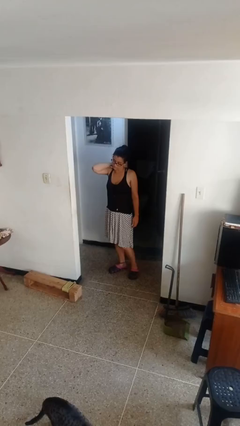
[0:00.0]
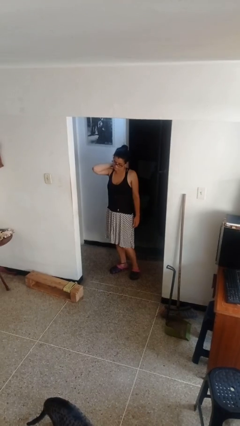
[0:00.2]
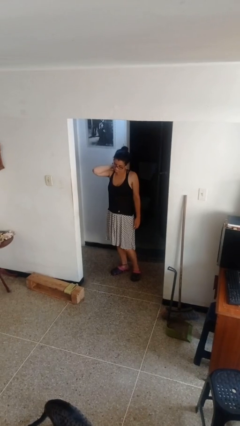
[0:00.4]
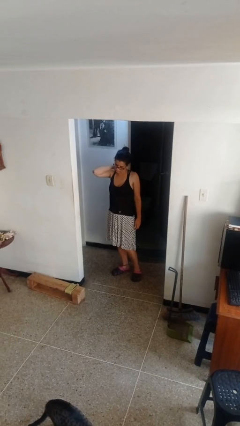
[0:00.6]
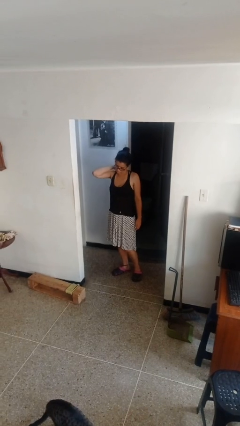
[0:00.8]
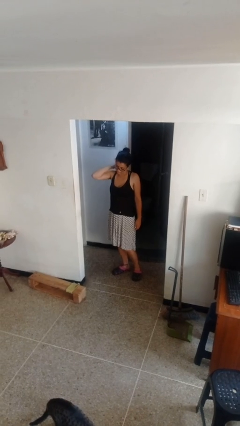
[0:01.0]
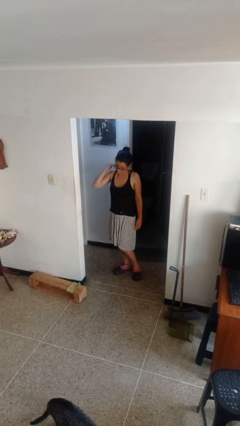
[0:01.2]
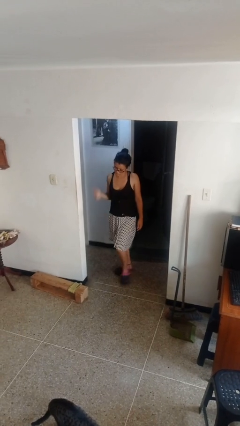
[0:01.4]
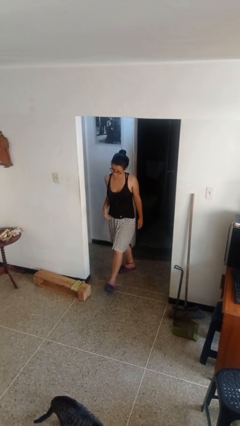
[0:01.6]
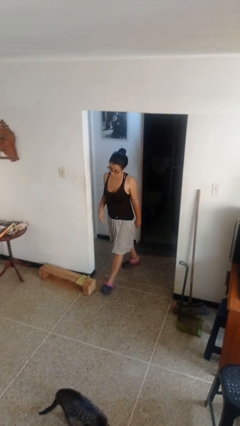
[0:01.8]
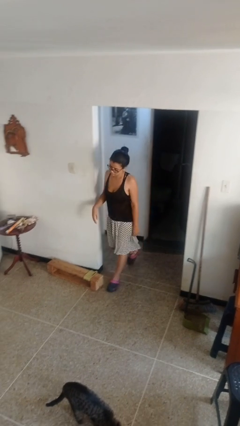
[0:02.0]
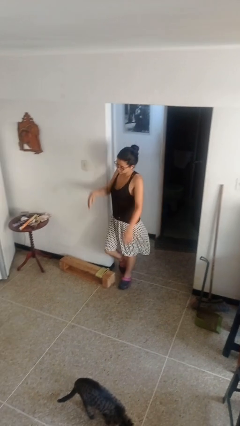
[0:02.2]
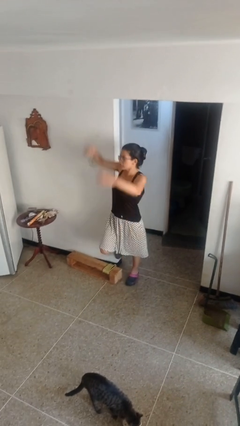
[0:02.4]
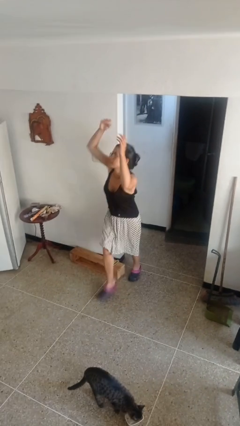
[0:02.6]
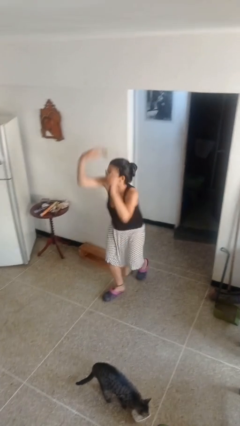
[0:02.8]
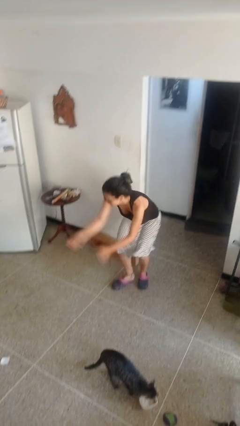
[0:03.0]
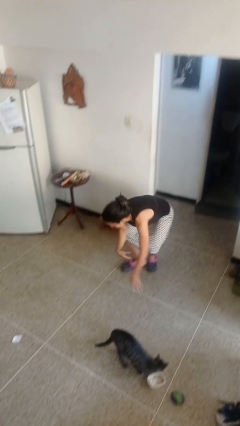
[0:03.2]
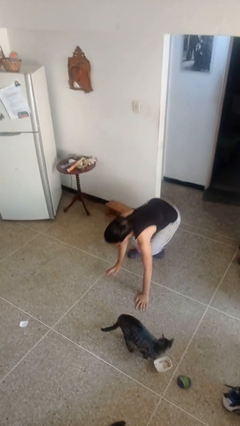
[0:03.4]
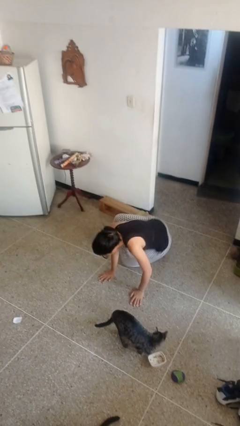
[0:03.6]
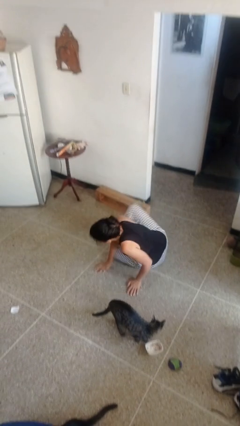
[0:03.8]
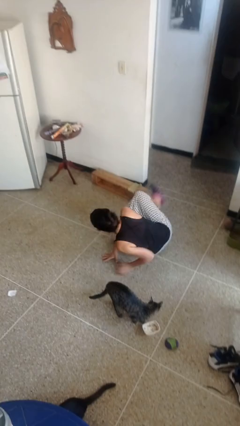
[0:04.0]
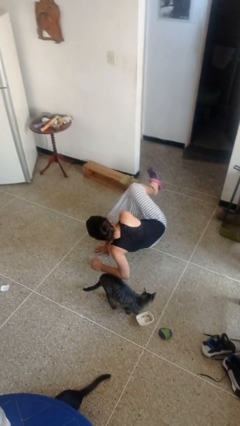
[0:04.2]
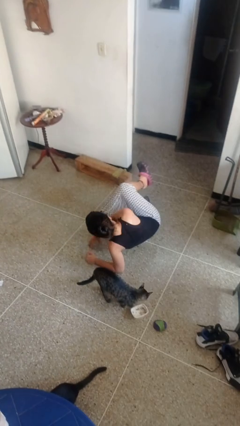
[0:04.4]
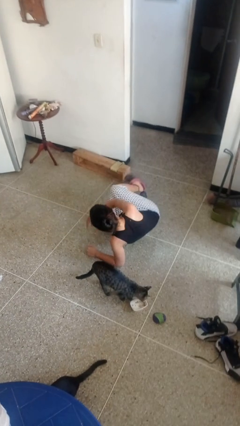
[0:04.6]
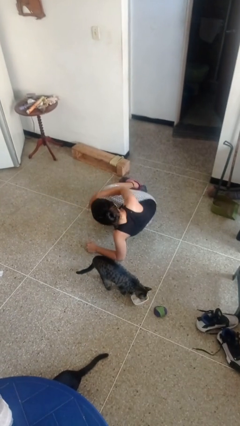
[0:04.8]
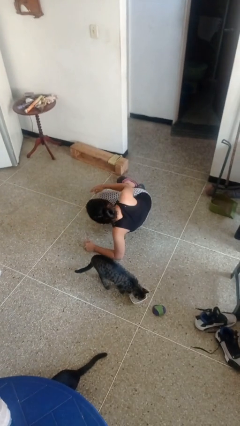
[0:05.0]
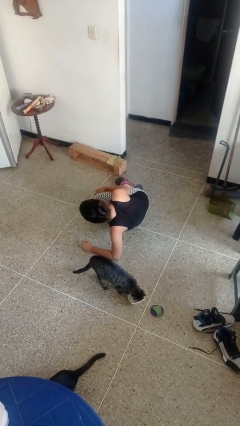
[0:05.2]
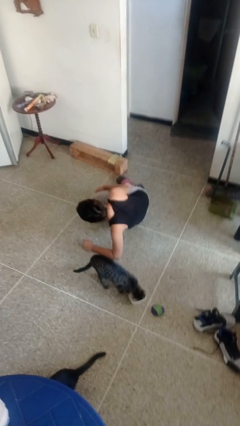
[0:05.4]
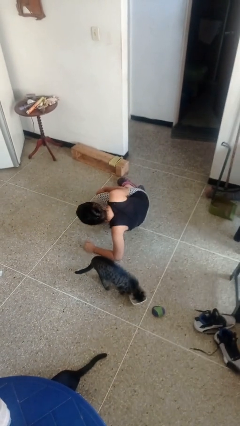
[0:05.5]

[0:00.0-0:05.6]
person trips on object on floor

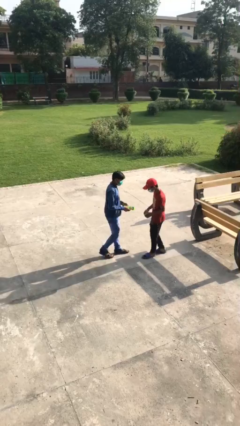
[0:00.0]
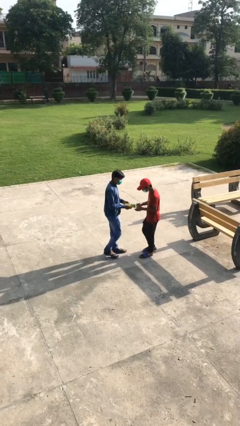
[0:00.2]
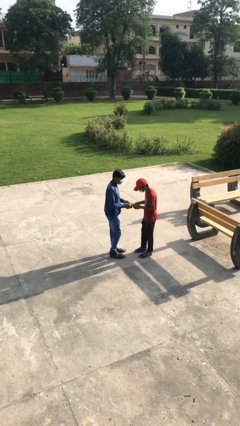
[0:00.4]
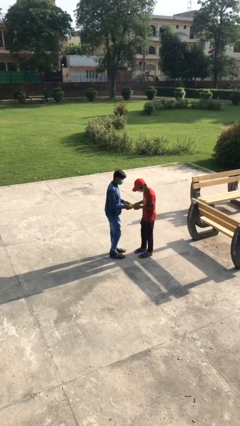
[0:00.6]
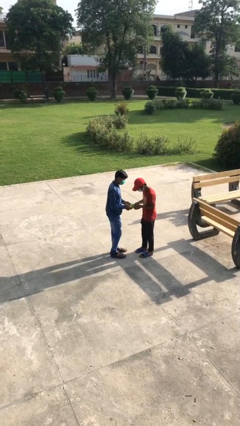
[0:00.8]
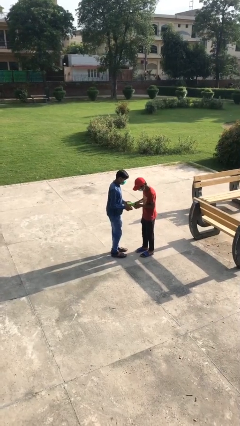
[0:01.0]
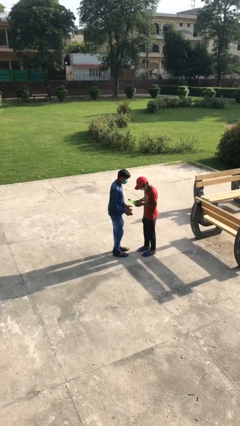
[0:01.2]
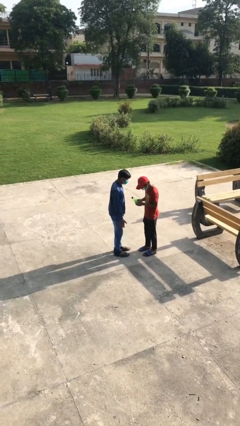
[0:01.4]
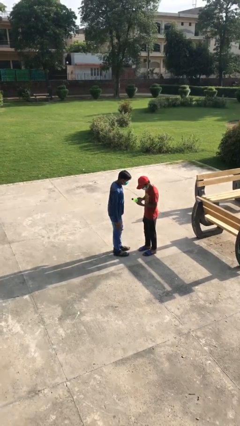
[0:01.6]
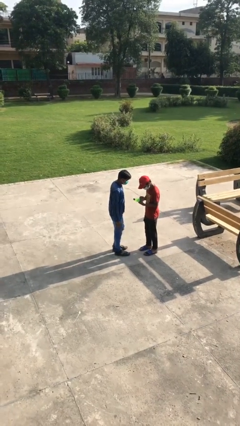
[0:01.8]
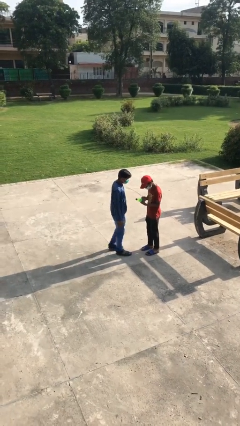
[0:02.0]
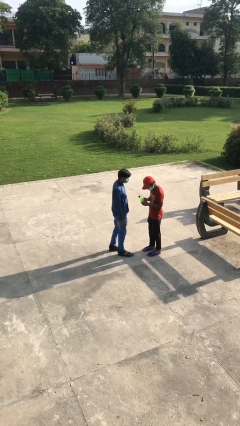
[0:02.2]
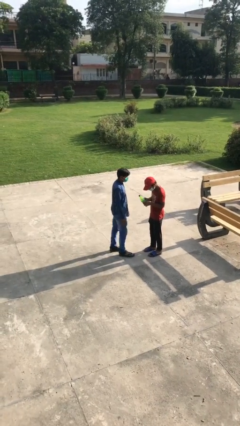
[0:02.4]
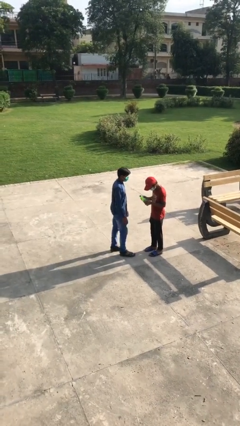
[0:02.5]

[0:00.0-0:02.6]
person transfers object to person

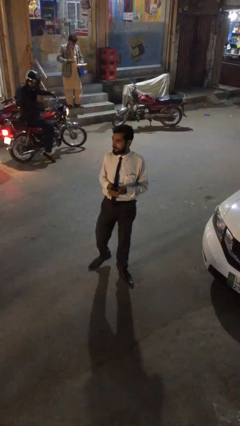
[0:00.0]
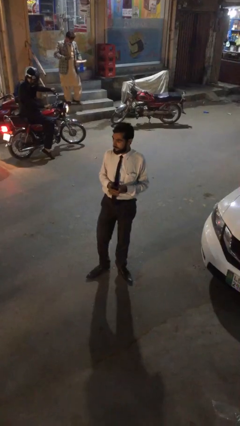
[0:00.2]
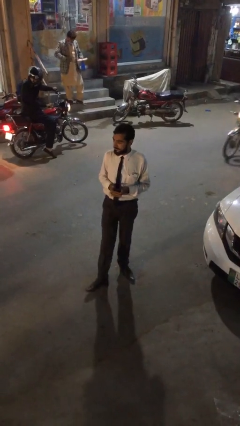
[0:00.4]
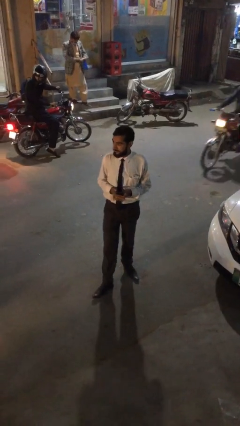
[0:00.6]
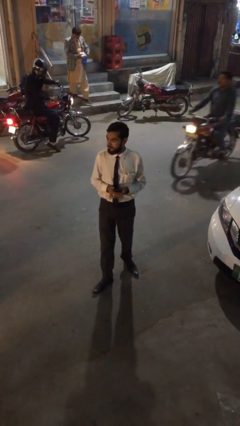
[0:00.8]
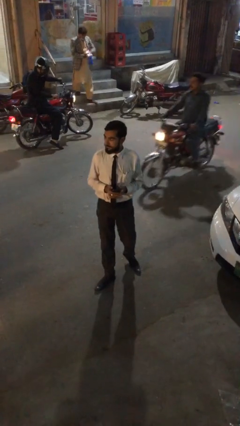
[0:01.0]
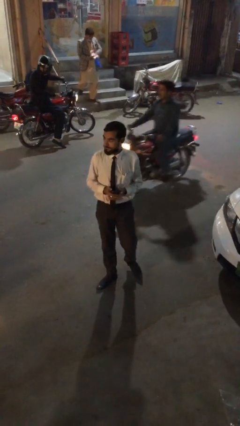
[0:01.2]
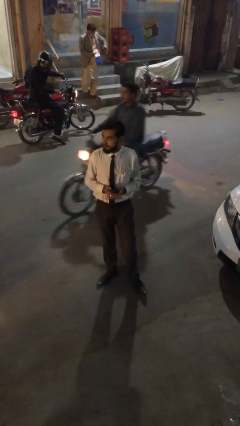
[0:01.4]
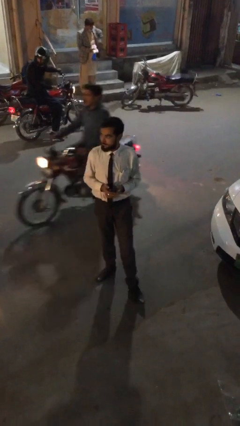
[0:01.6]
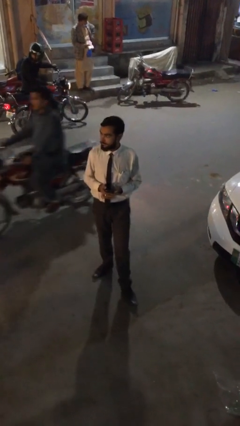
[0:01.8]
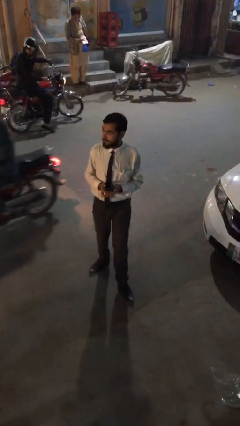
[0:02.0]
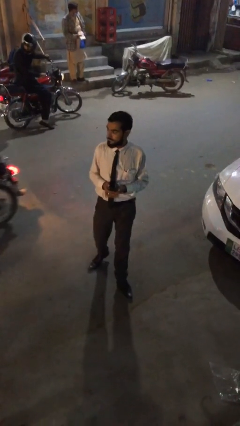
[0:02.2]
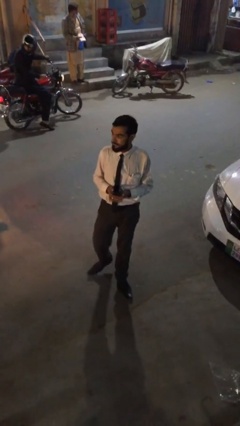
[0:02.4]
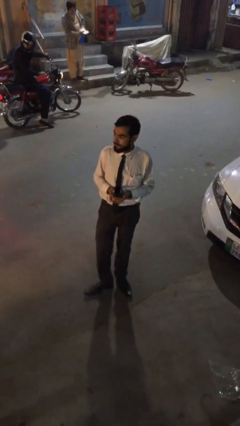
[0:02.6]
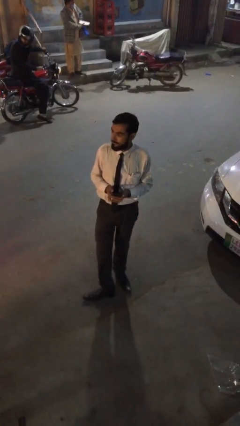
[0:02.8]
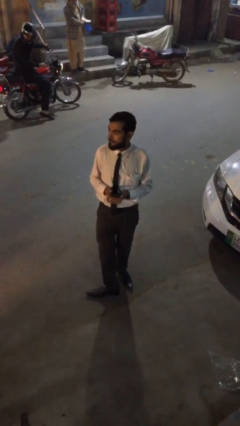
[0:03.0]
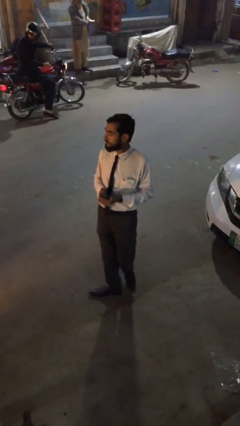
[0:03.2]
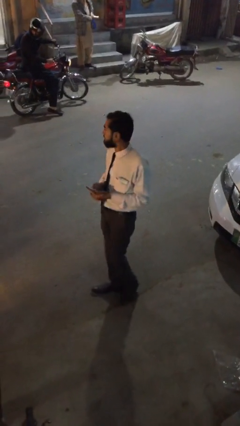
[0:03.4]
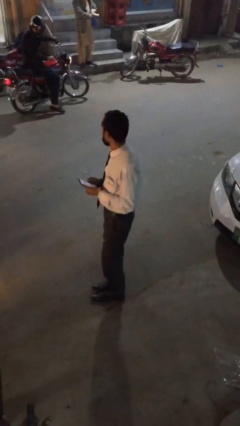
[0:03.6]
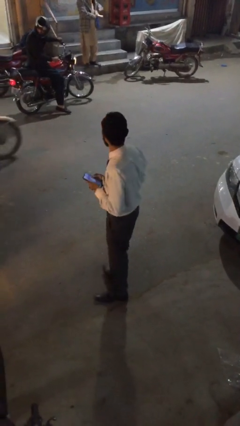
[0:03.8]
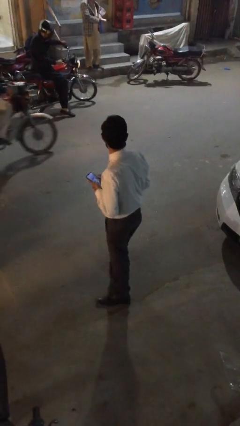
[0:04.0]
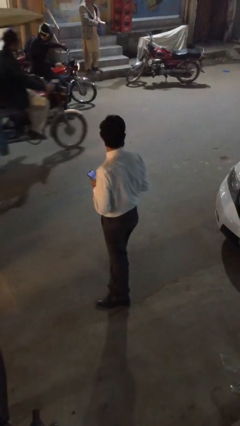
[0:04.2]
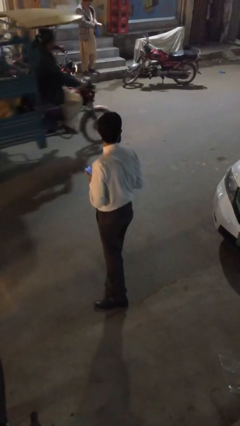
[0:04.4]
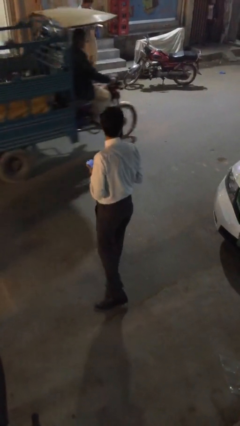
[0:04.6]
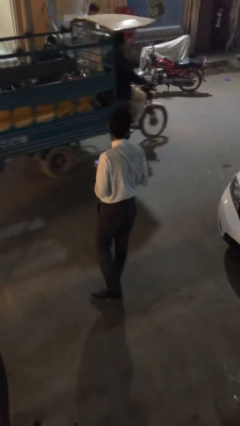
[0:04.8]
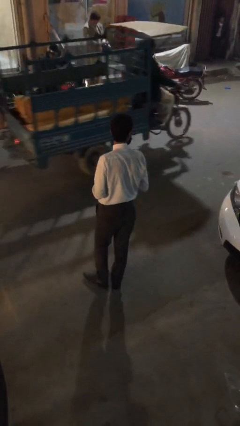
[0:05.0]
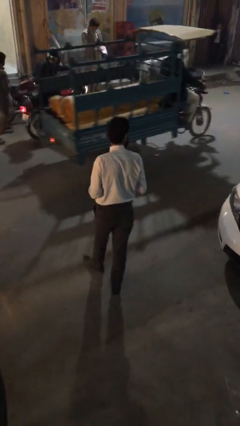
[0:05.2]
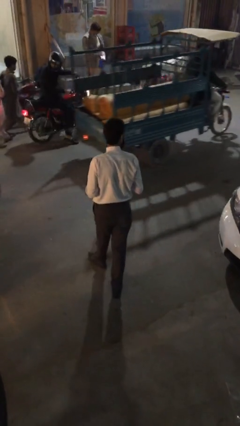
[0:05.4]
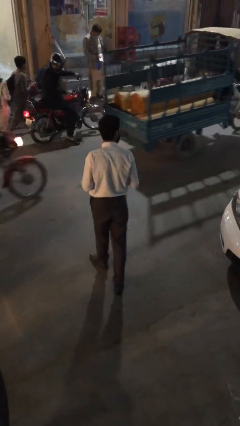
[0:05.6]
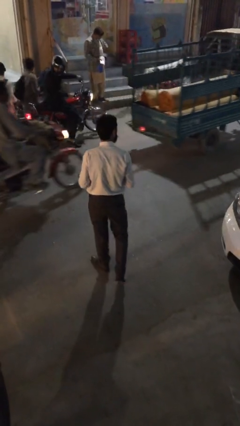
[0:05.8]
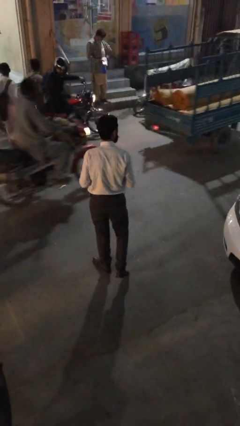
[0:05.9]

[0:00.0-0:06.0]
person walks

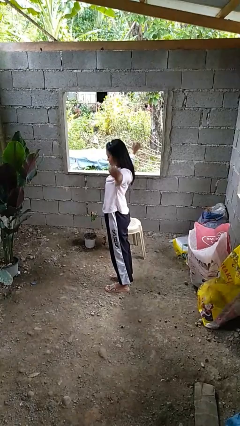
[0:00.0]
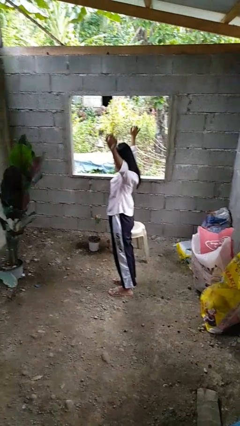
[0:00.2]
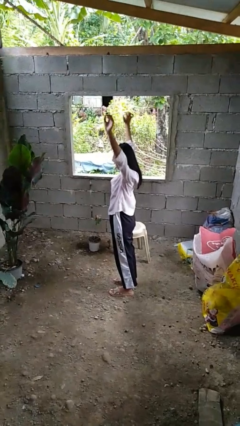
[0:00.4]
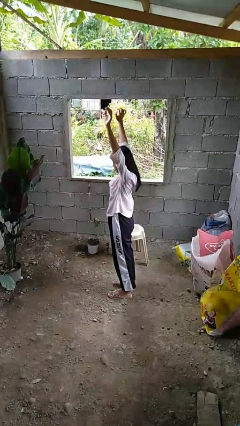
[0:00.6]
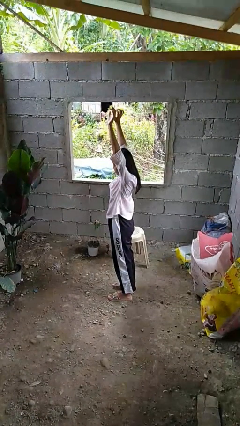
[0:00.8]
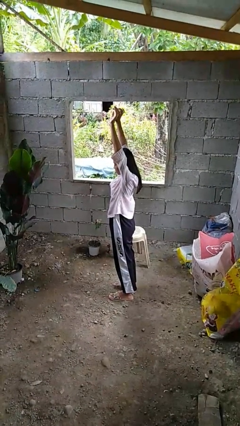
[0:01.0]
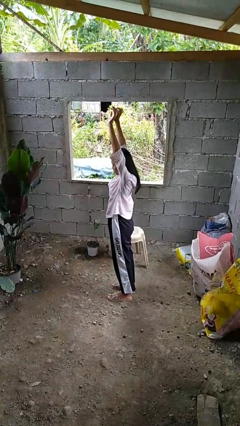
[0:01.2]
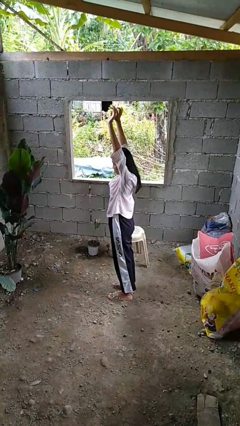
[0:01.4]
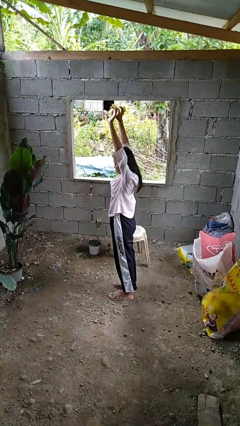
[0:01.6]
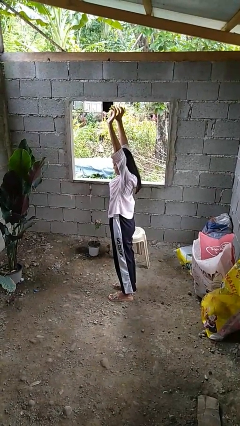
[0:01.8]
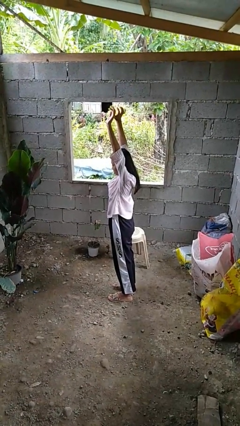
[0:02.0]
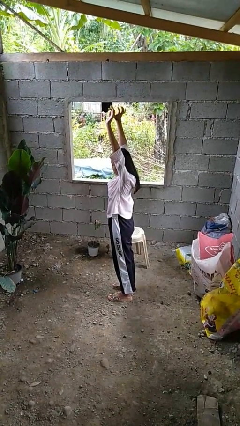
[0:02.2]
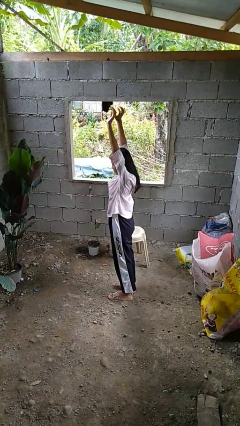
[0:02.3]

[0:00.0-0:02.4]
person stretches arms over head

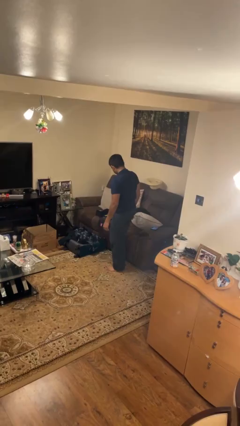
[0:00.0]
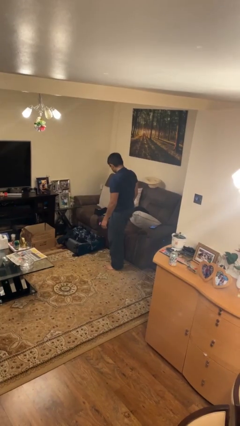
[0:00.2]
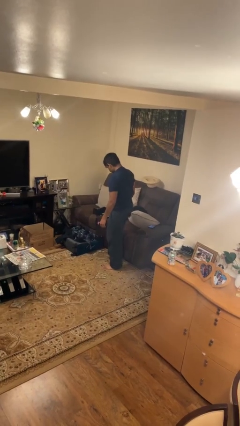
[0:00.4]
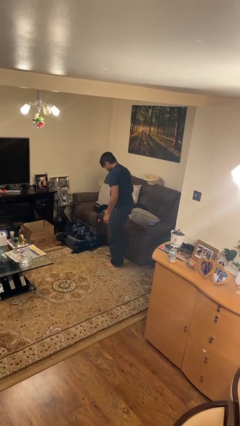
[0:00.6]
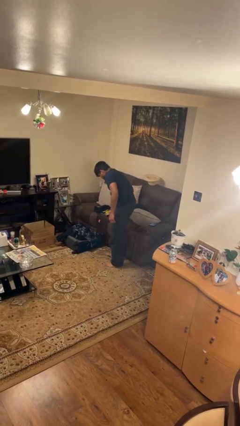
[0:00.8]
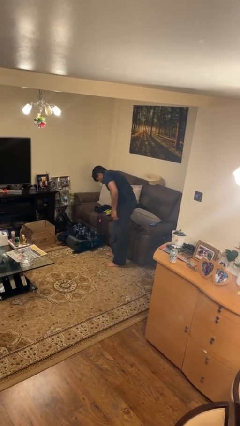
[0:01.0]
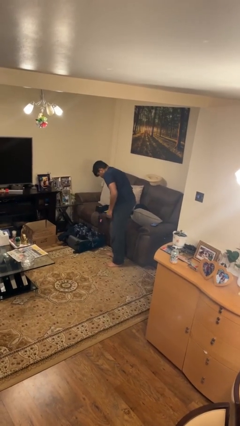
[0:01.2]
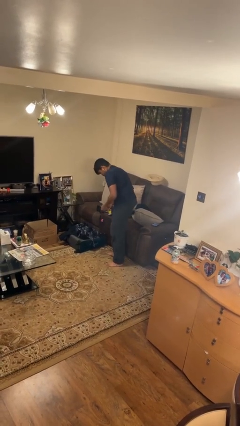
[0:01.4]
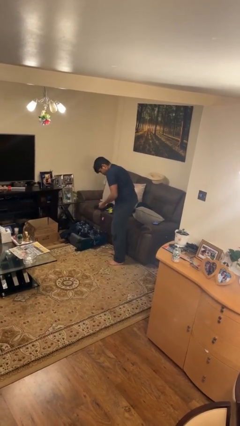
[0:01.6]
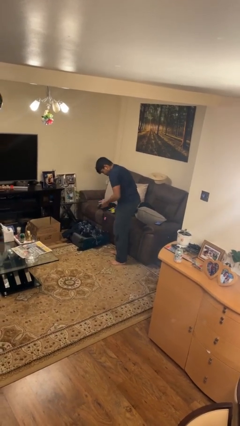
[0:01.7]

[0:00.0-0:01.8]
person loads clothes into suitcase
